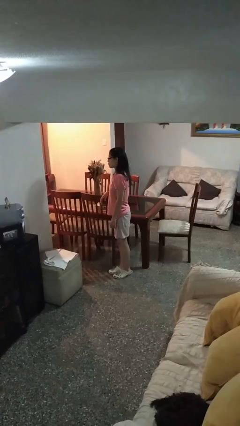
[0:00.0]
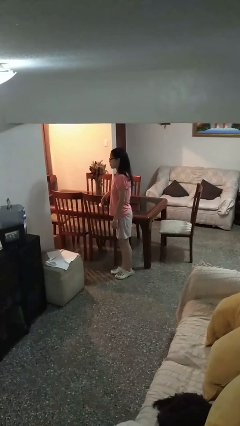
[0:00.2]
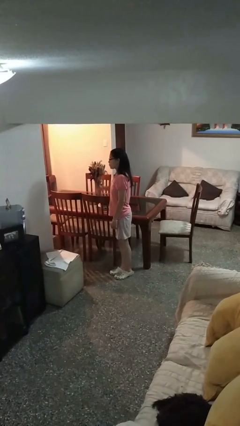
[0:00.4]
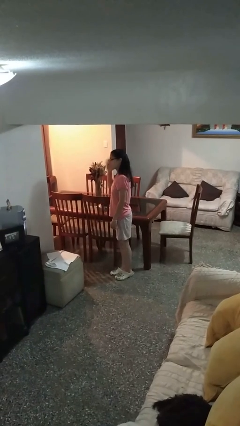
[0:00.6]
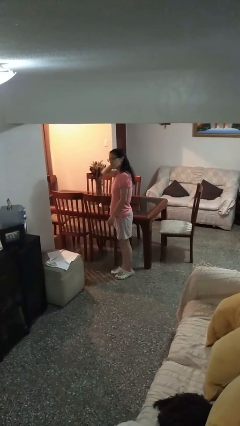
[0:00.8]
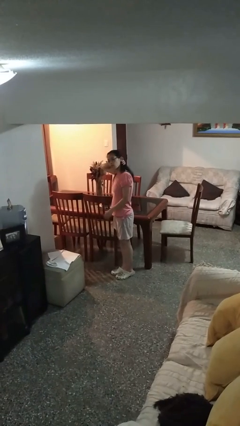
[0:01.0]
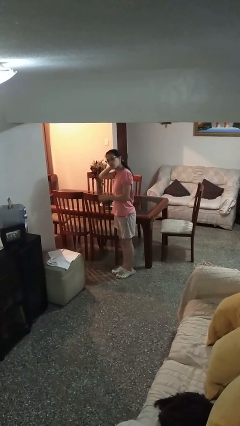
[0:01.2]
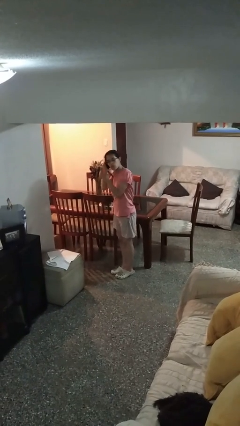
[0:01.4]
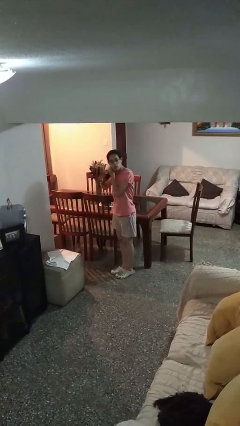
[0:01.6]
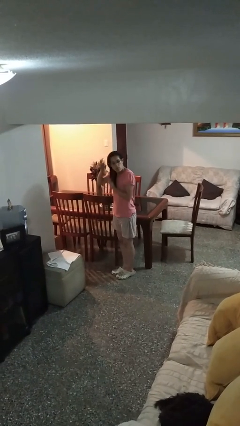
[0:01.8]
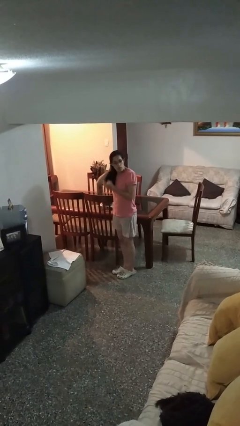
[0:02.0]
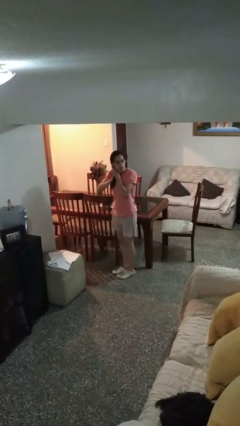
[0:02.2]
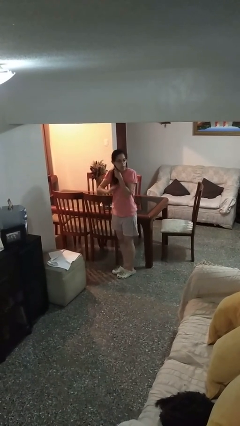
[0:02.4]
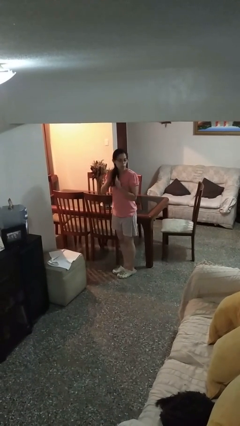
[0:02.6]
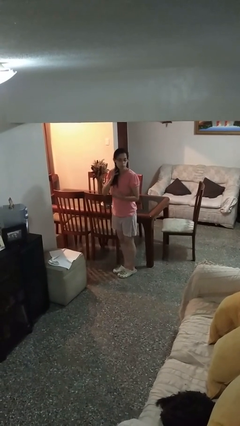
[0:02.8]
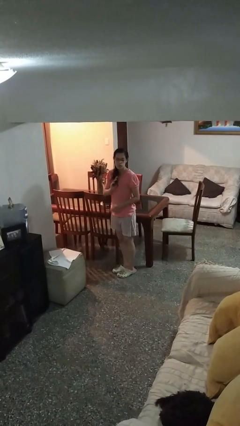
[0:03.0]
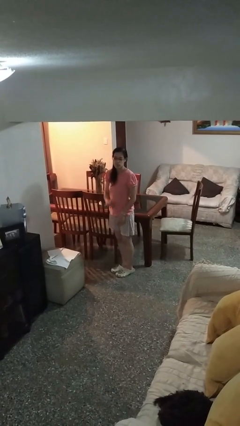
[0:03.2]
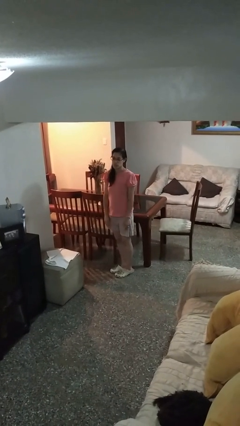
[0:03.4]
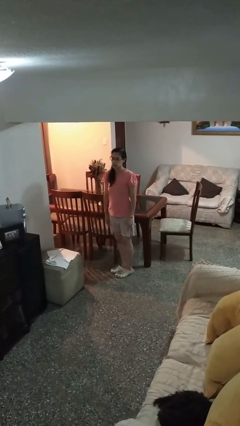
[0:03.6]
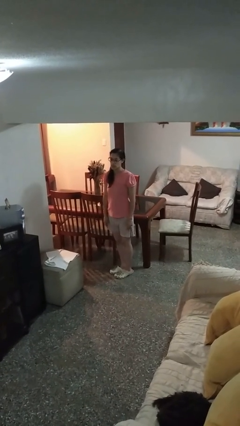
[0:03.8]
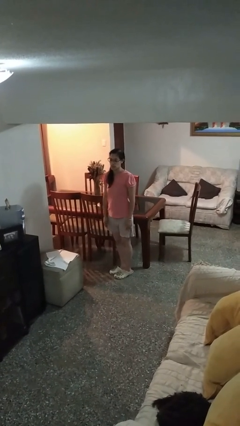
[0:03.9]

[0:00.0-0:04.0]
person strokes hair

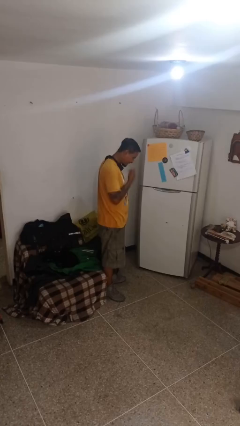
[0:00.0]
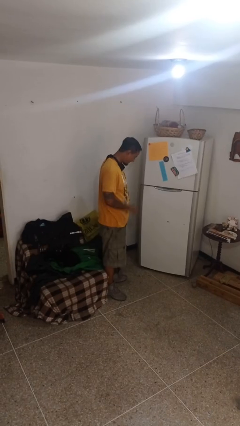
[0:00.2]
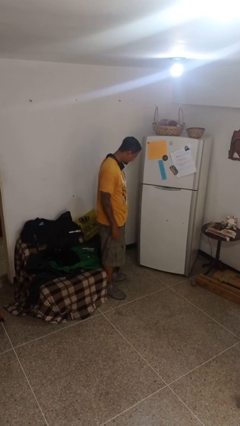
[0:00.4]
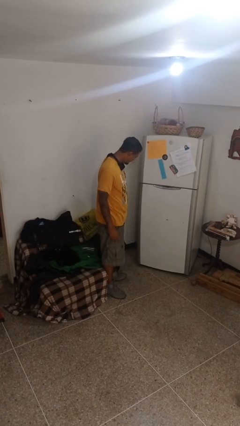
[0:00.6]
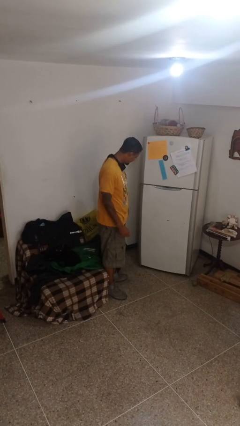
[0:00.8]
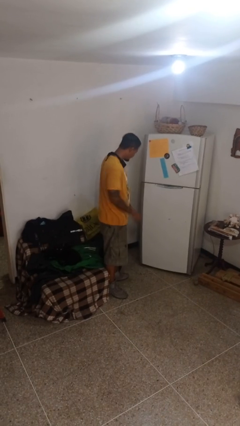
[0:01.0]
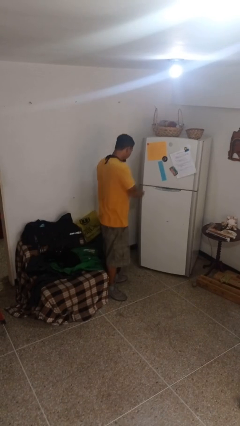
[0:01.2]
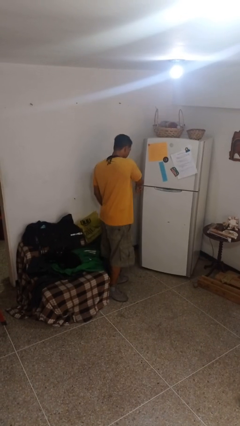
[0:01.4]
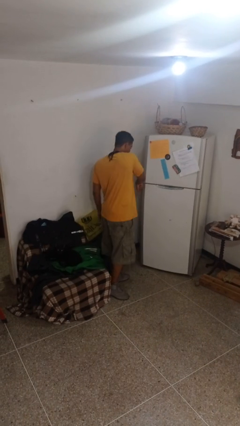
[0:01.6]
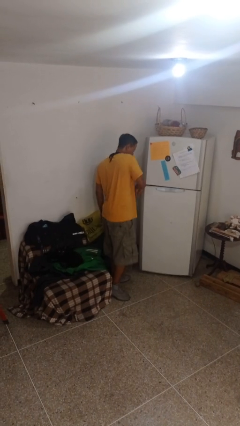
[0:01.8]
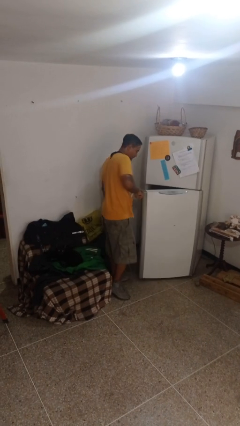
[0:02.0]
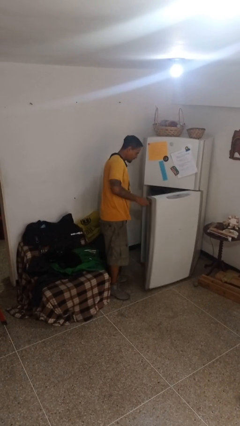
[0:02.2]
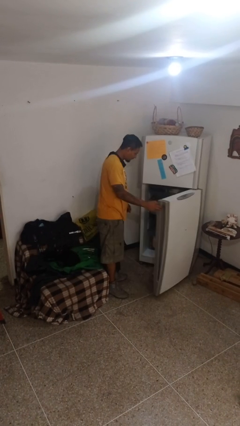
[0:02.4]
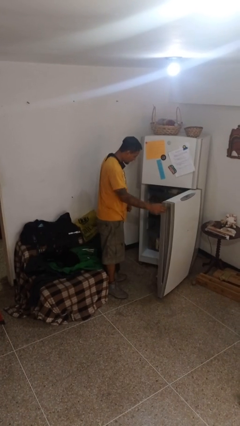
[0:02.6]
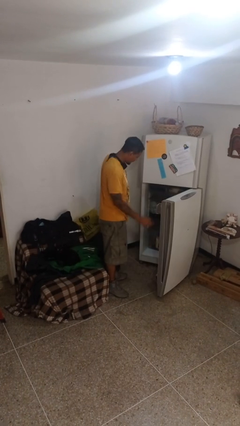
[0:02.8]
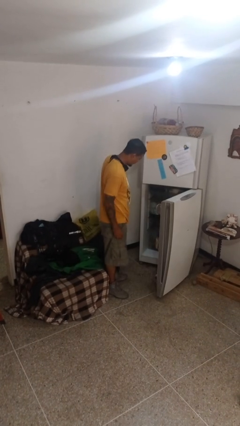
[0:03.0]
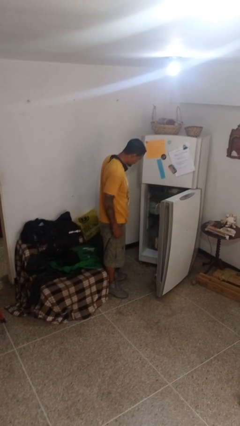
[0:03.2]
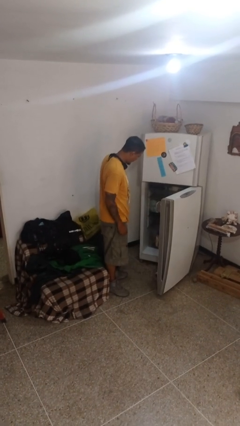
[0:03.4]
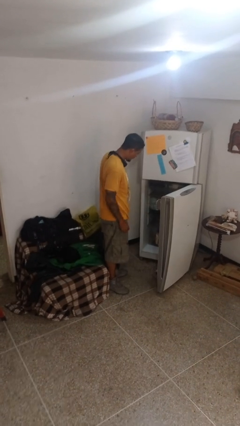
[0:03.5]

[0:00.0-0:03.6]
person opens refrigerator

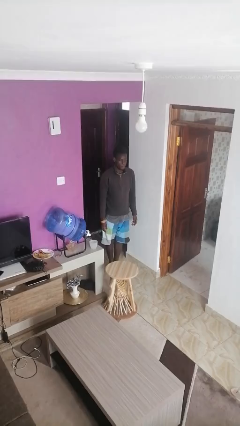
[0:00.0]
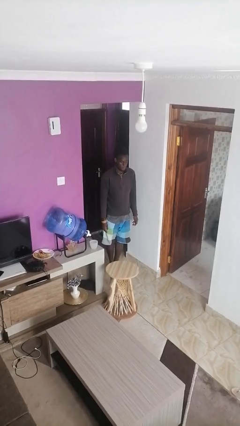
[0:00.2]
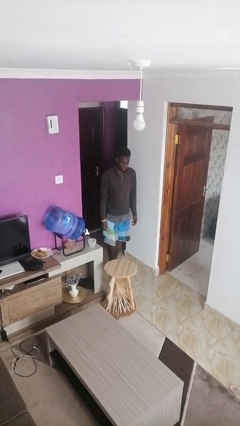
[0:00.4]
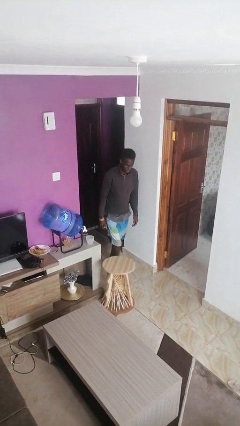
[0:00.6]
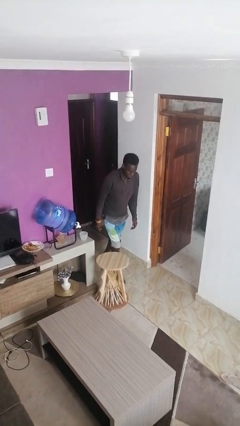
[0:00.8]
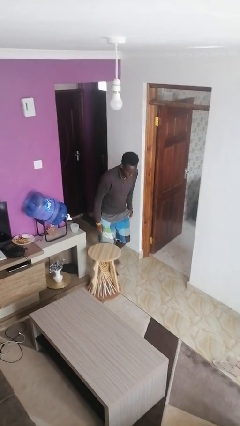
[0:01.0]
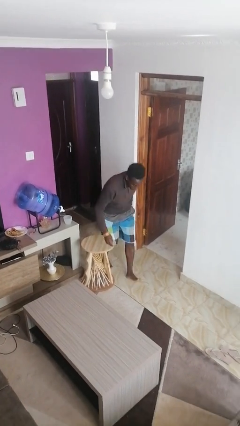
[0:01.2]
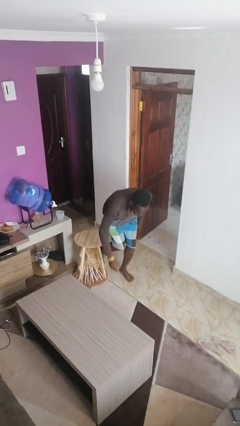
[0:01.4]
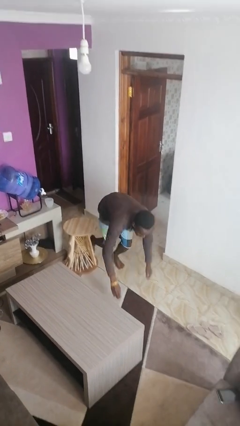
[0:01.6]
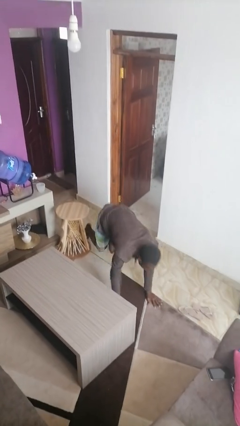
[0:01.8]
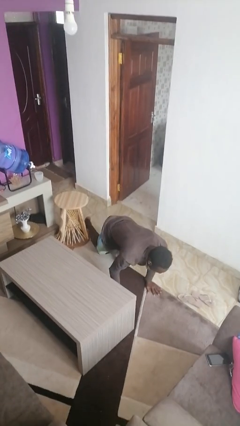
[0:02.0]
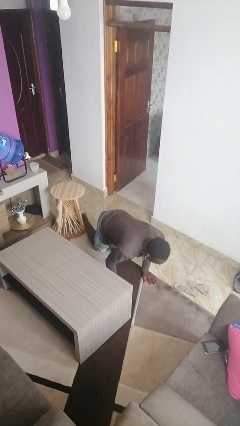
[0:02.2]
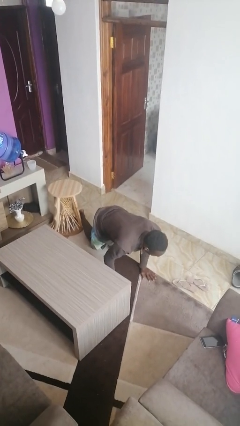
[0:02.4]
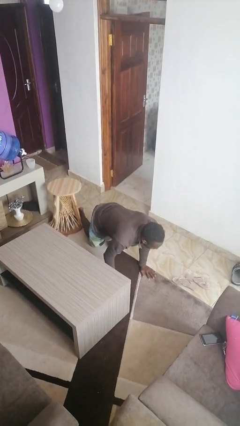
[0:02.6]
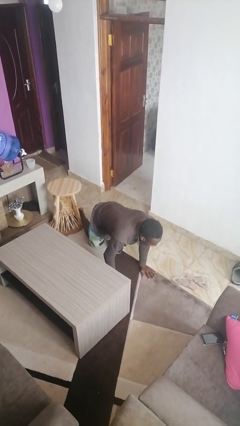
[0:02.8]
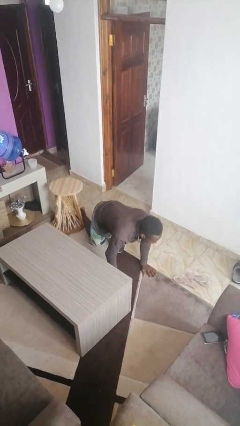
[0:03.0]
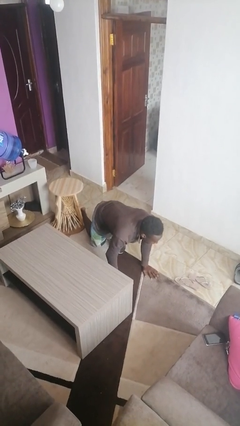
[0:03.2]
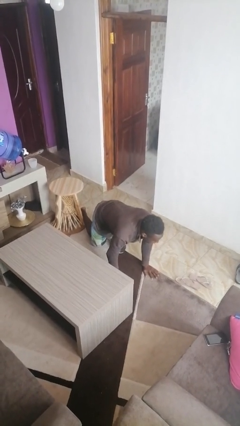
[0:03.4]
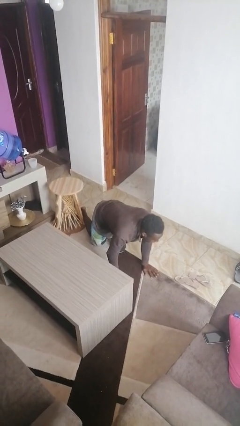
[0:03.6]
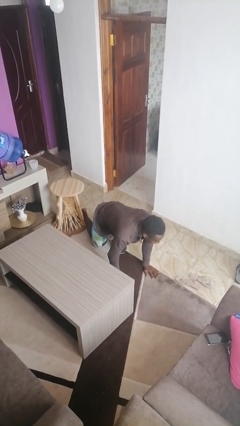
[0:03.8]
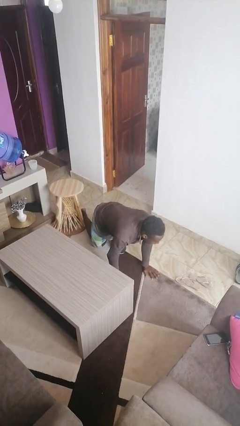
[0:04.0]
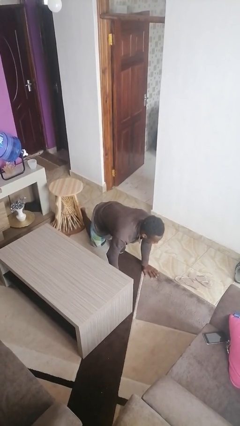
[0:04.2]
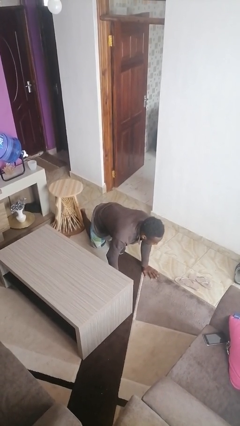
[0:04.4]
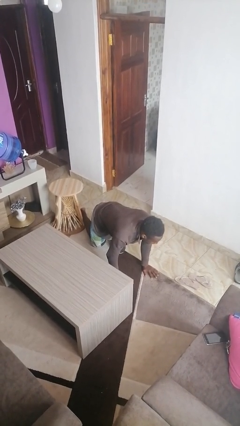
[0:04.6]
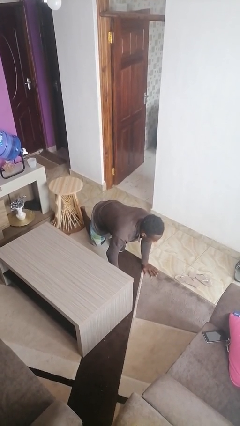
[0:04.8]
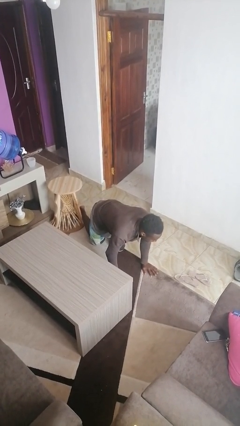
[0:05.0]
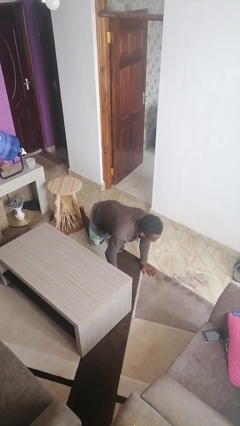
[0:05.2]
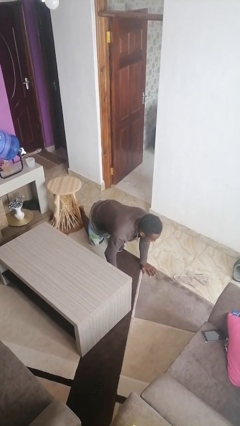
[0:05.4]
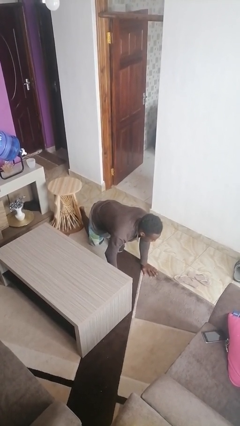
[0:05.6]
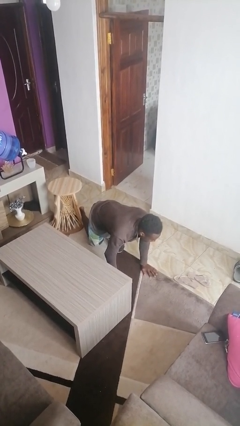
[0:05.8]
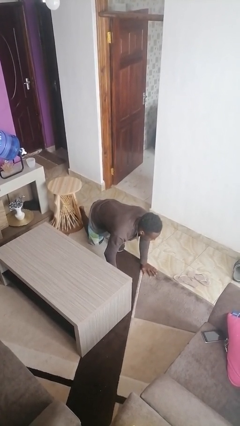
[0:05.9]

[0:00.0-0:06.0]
person trips on object on floor

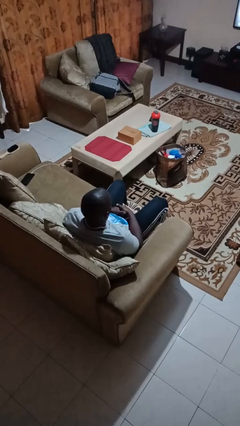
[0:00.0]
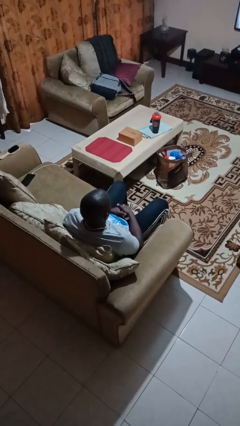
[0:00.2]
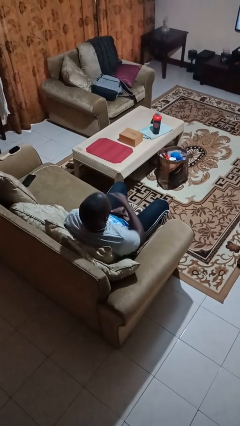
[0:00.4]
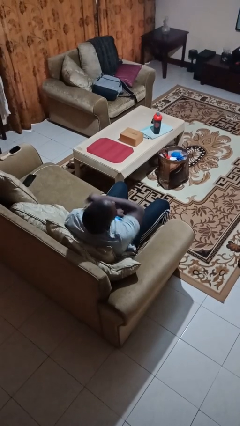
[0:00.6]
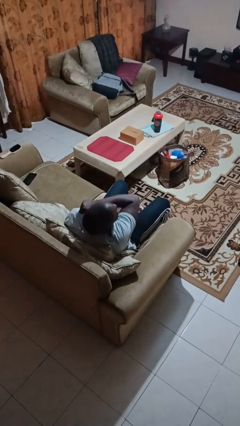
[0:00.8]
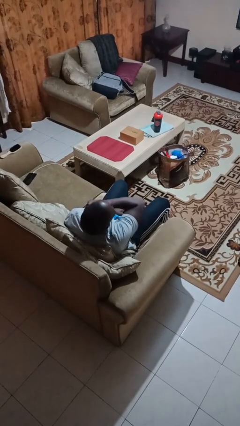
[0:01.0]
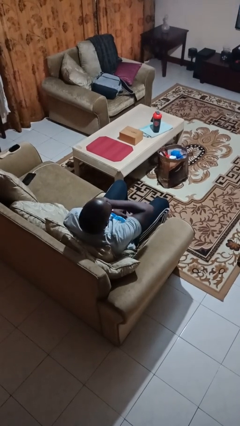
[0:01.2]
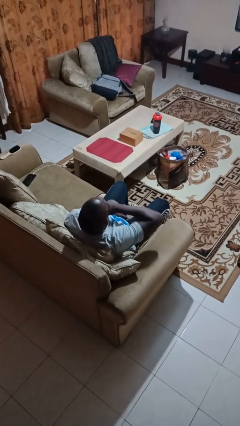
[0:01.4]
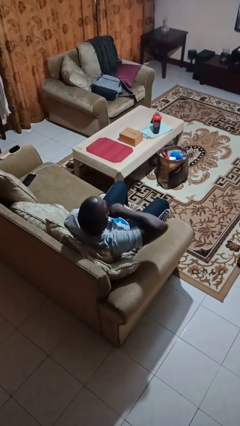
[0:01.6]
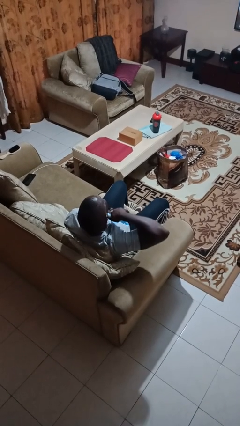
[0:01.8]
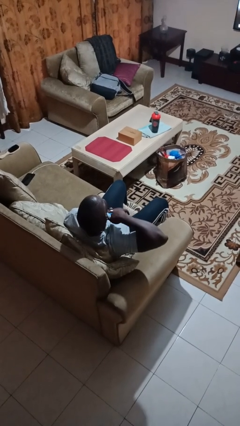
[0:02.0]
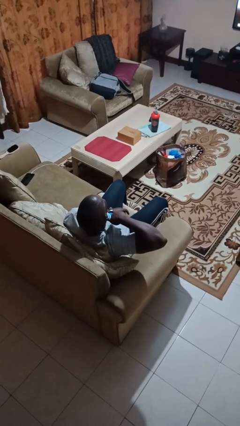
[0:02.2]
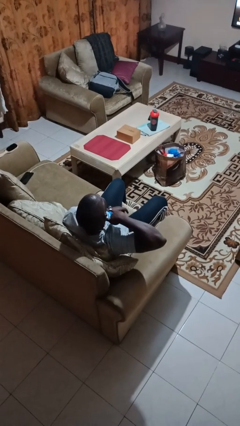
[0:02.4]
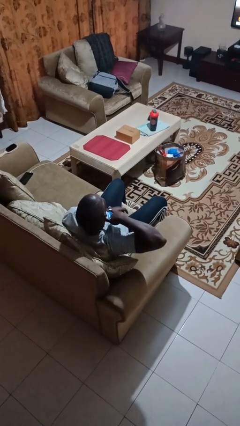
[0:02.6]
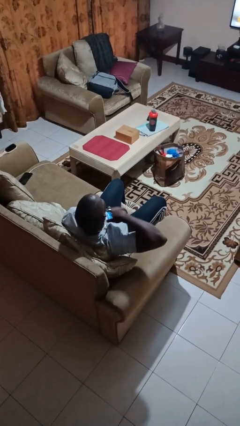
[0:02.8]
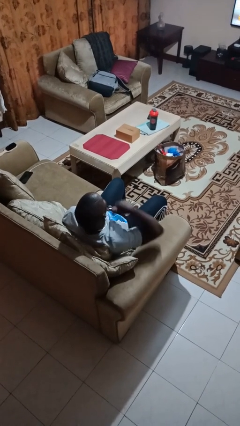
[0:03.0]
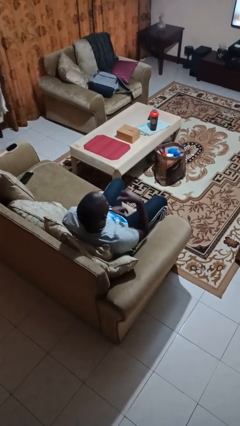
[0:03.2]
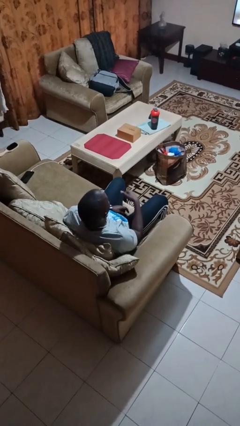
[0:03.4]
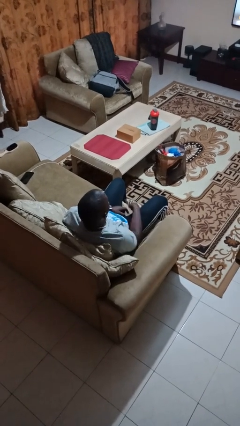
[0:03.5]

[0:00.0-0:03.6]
person gestures cut

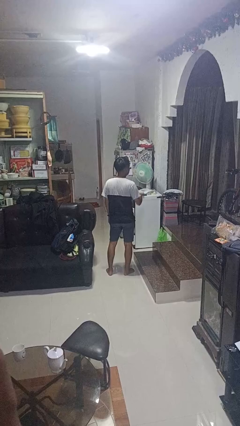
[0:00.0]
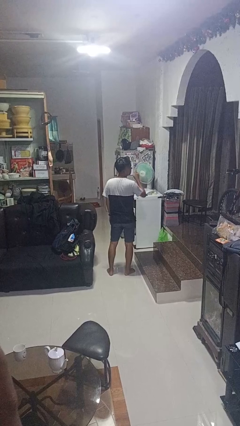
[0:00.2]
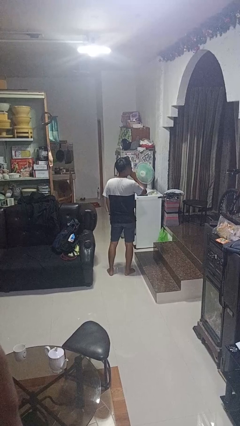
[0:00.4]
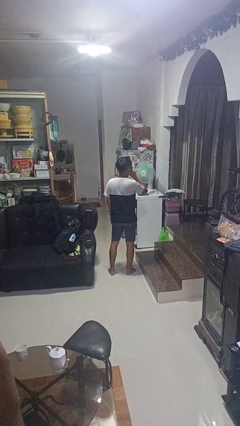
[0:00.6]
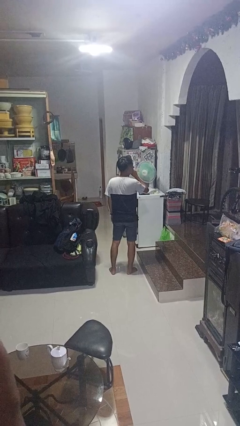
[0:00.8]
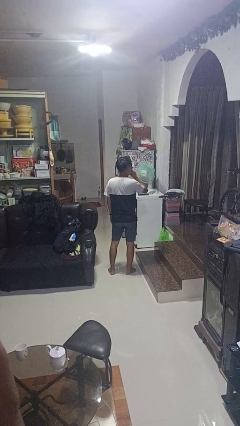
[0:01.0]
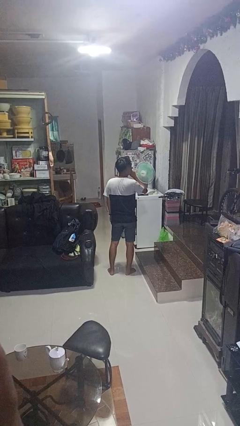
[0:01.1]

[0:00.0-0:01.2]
person gestures be quiet
